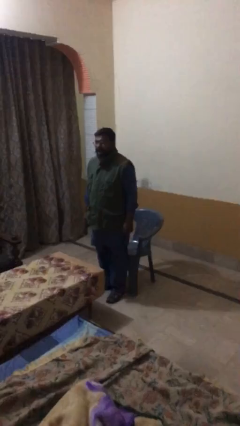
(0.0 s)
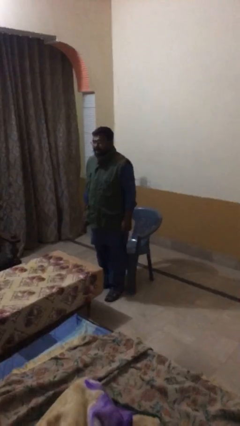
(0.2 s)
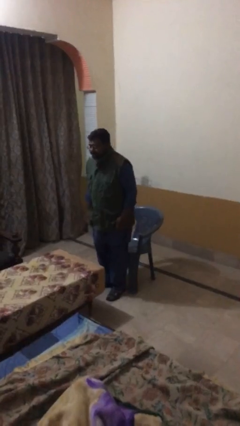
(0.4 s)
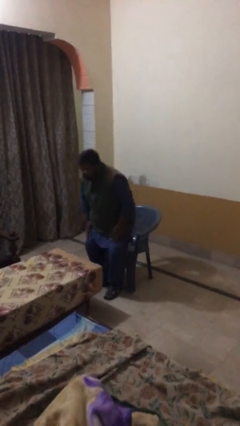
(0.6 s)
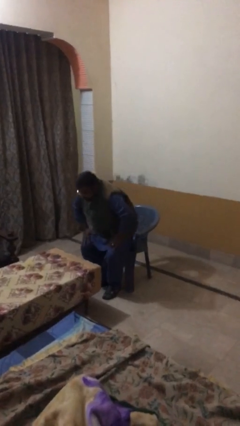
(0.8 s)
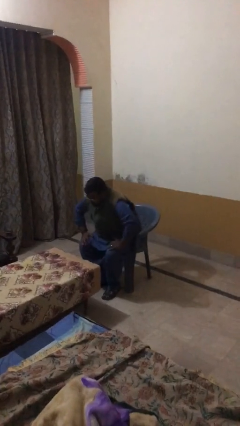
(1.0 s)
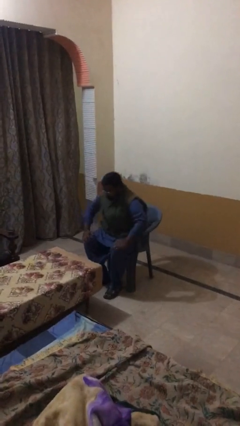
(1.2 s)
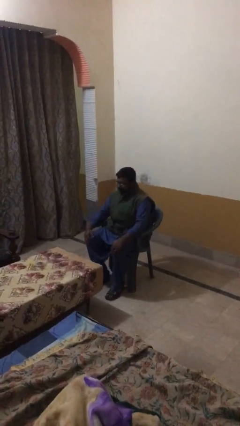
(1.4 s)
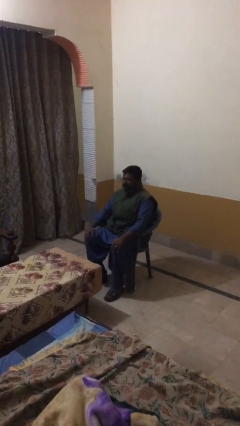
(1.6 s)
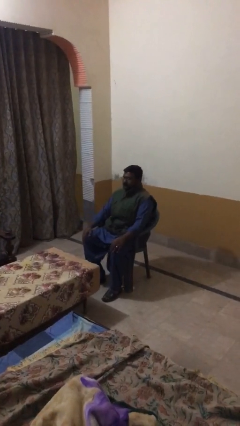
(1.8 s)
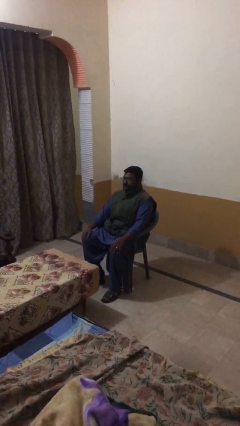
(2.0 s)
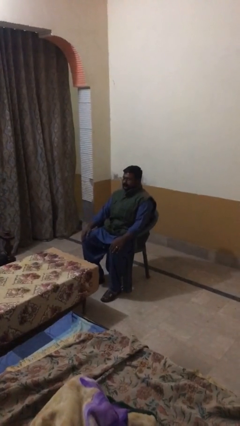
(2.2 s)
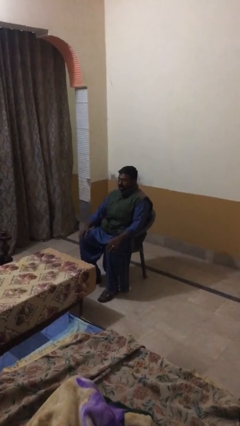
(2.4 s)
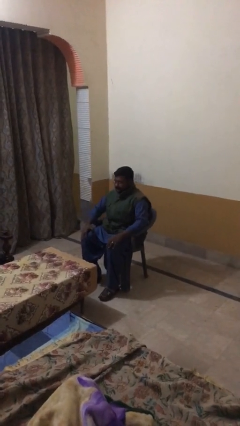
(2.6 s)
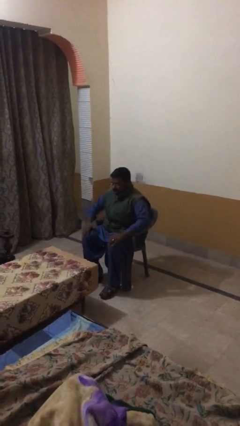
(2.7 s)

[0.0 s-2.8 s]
person sits down

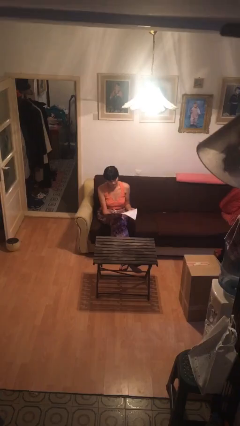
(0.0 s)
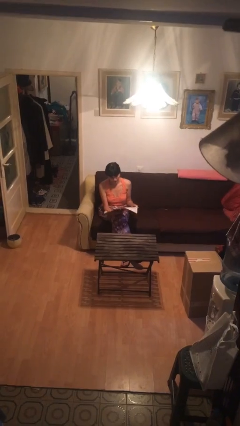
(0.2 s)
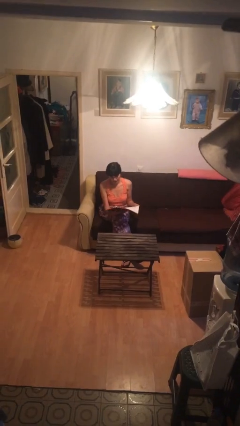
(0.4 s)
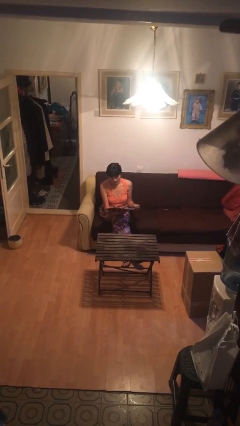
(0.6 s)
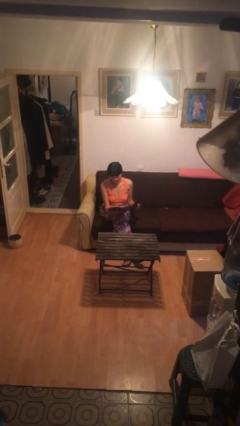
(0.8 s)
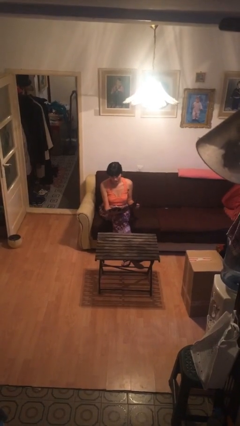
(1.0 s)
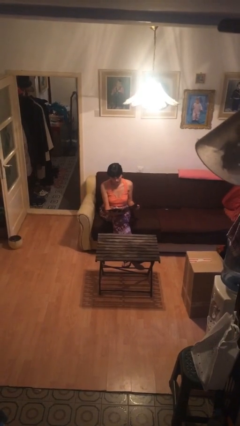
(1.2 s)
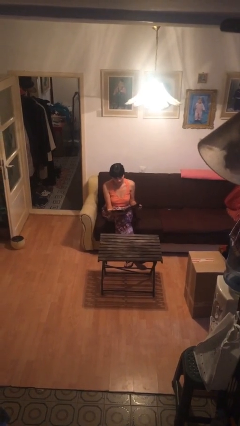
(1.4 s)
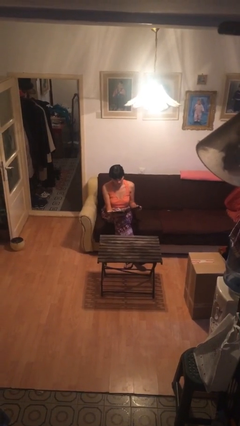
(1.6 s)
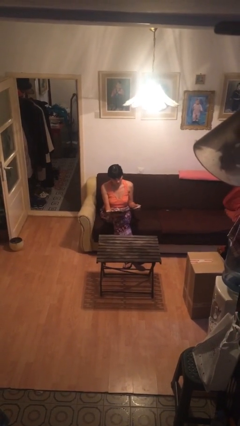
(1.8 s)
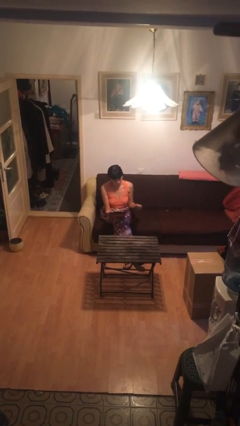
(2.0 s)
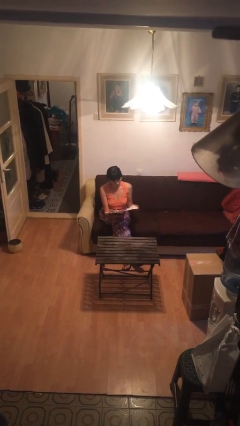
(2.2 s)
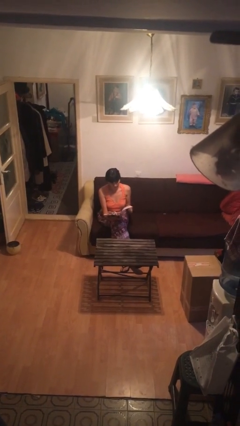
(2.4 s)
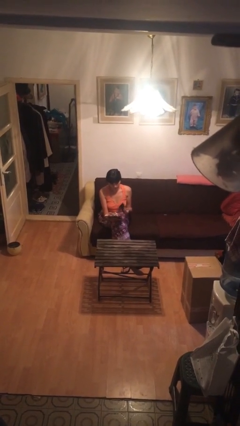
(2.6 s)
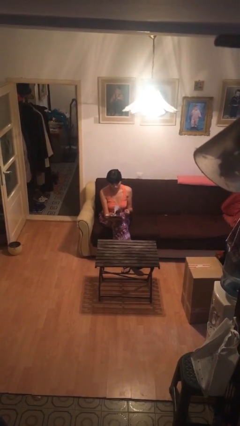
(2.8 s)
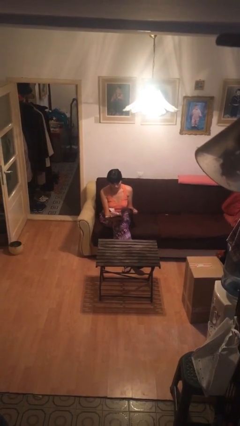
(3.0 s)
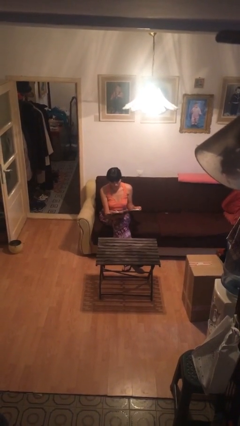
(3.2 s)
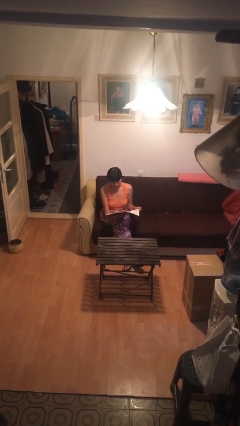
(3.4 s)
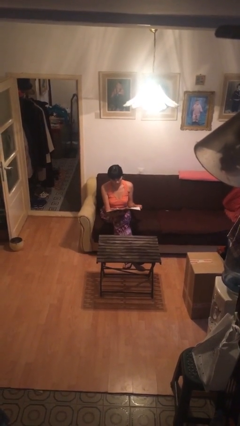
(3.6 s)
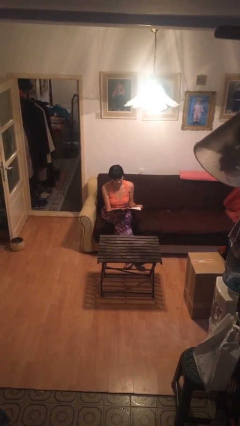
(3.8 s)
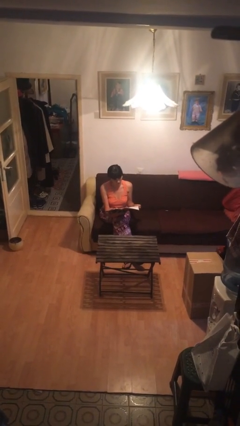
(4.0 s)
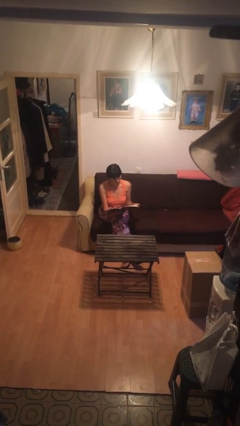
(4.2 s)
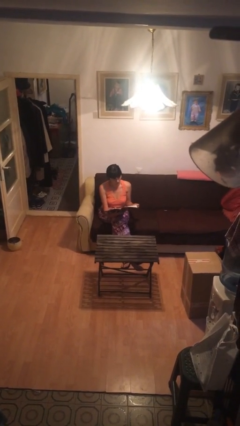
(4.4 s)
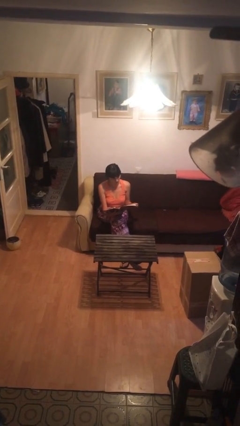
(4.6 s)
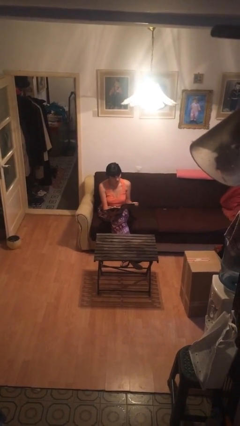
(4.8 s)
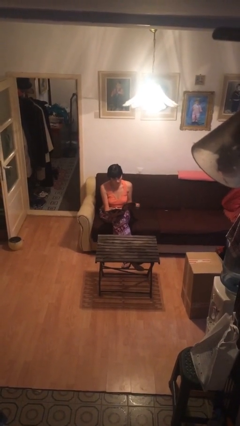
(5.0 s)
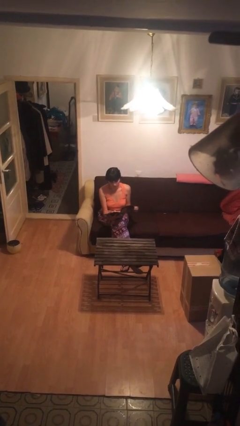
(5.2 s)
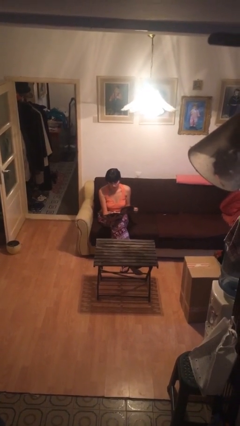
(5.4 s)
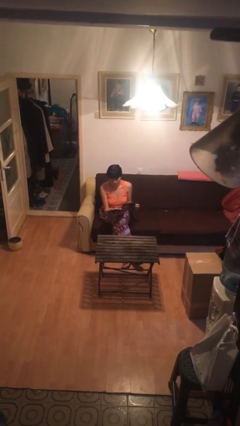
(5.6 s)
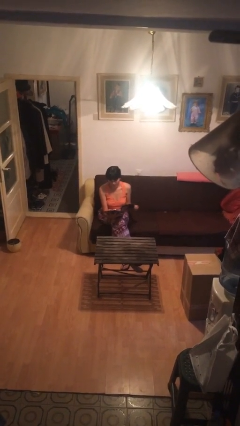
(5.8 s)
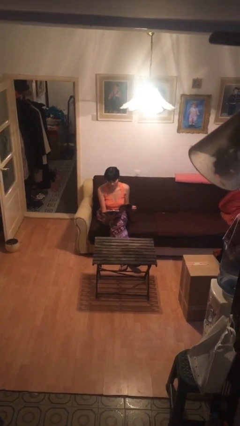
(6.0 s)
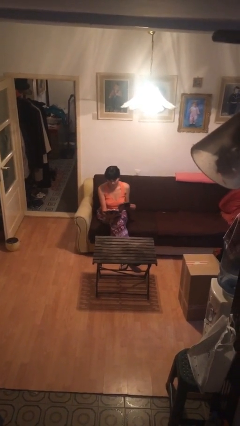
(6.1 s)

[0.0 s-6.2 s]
person reads document

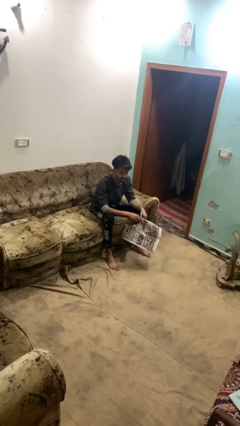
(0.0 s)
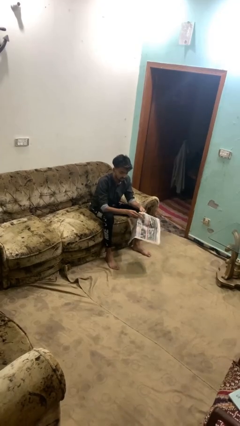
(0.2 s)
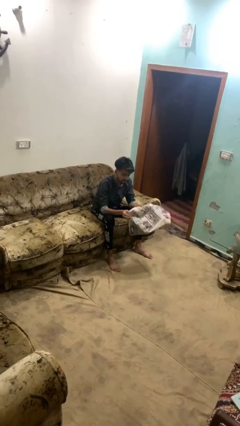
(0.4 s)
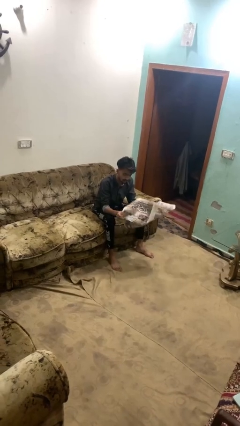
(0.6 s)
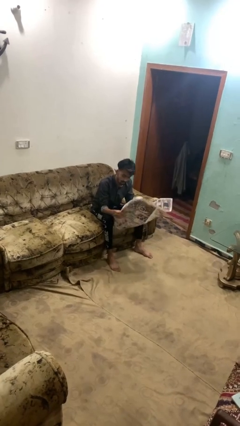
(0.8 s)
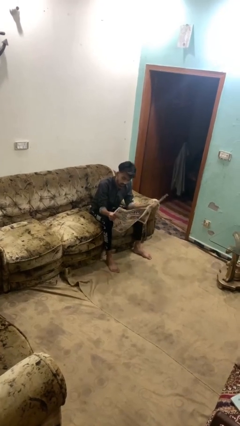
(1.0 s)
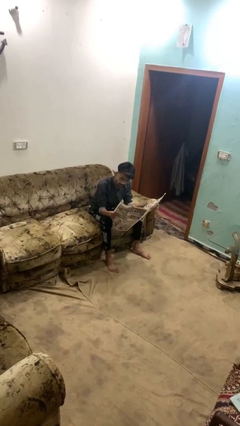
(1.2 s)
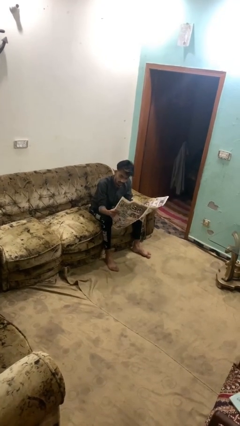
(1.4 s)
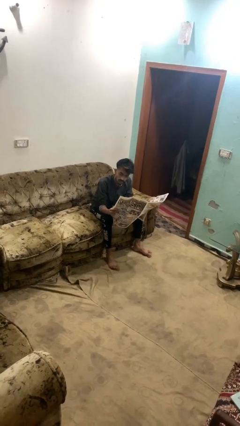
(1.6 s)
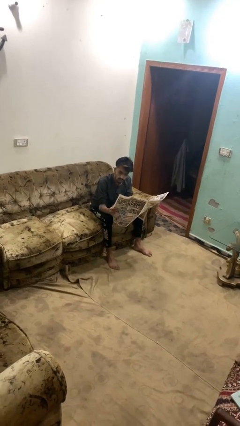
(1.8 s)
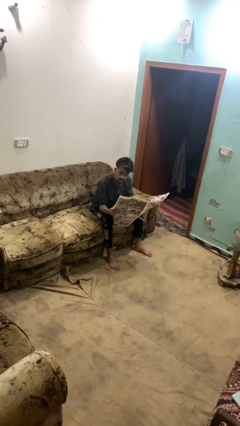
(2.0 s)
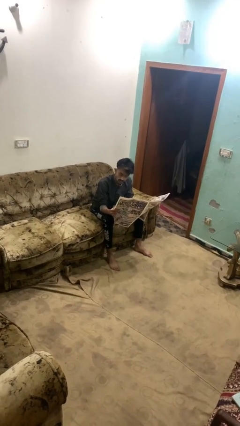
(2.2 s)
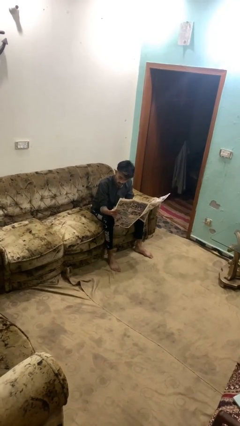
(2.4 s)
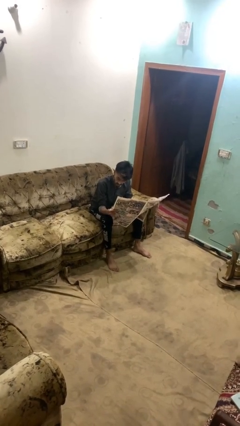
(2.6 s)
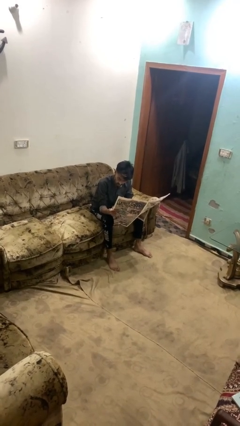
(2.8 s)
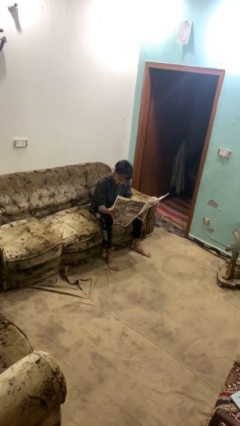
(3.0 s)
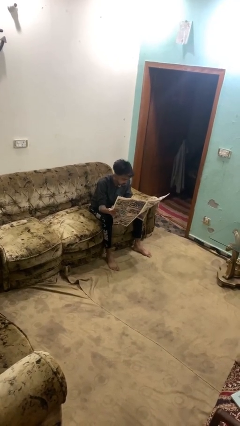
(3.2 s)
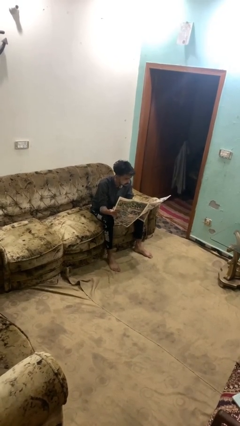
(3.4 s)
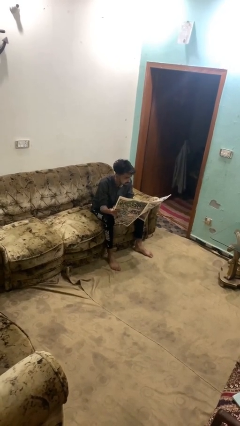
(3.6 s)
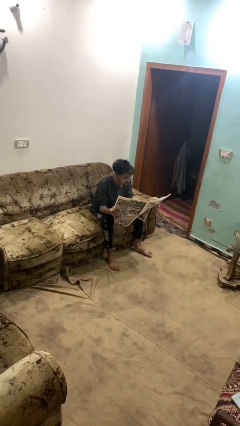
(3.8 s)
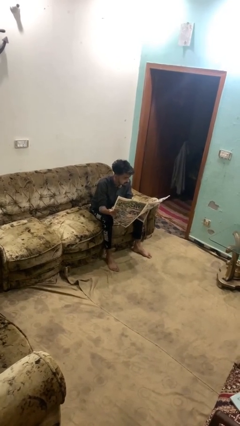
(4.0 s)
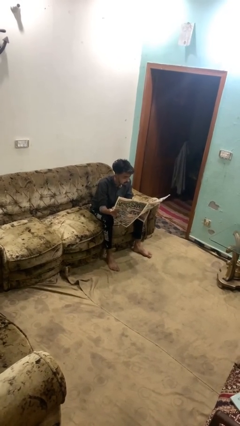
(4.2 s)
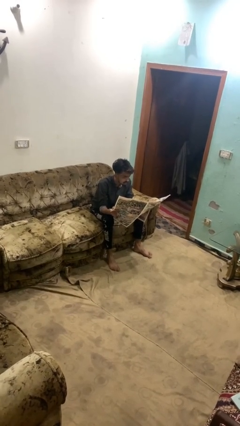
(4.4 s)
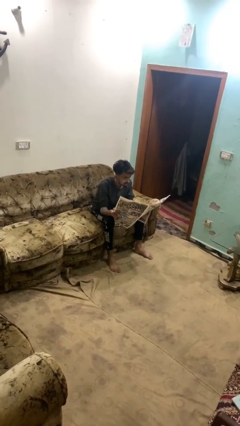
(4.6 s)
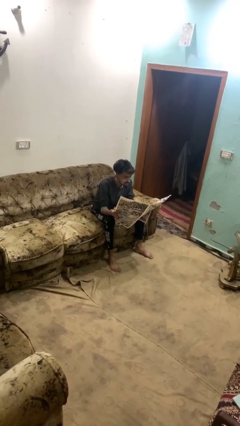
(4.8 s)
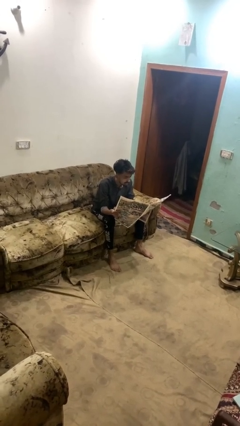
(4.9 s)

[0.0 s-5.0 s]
person reads newspaper

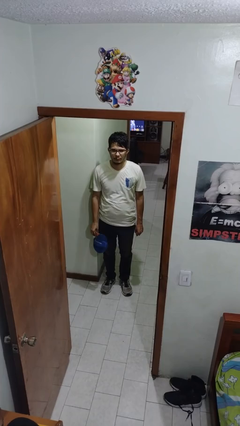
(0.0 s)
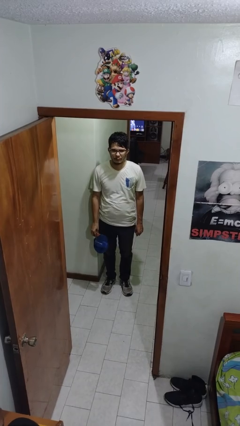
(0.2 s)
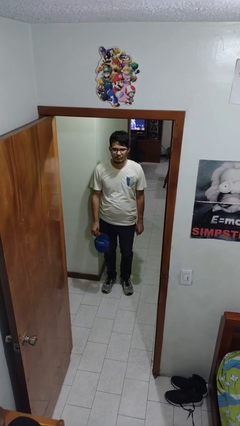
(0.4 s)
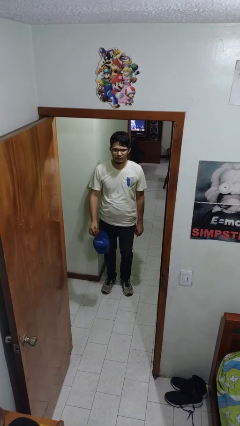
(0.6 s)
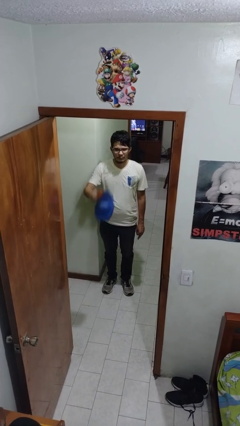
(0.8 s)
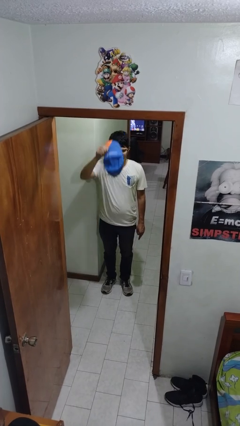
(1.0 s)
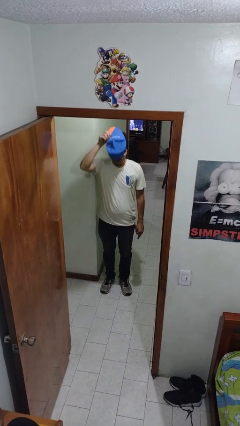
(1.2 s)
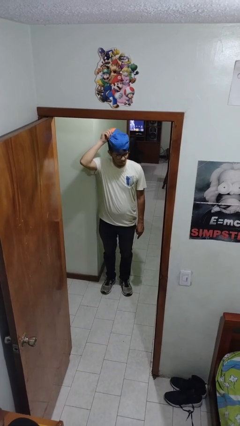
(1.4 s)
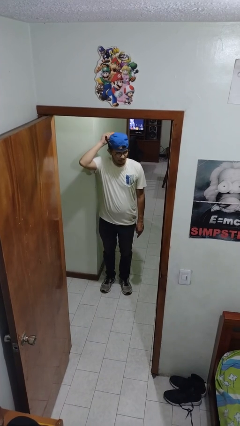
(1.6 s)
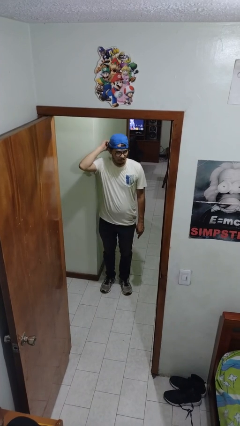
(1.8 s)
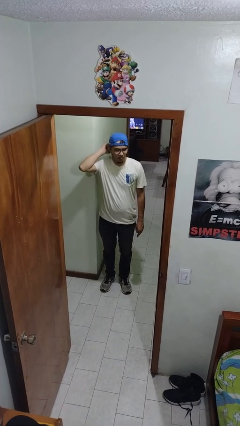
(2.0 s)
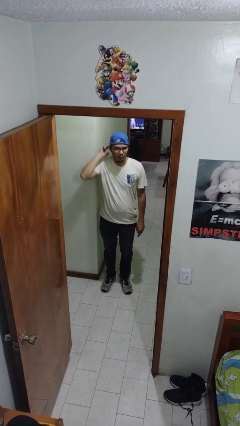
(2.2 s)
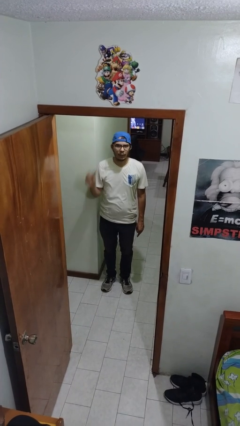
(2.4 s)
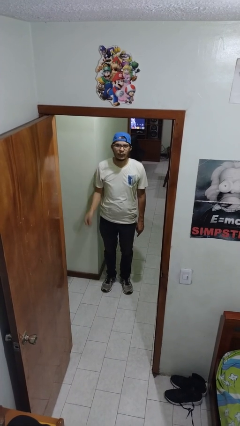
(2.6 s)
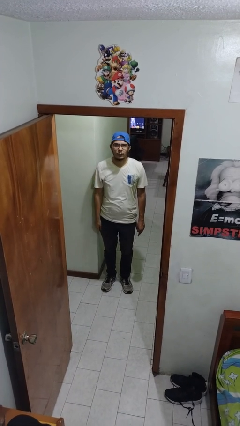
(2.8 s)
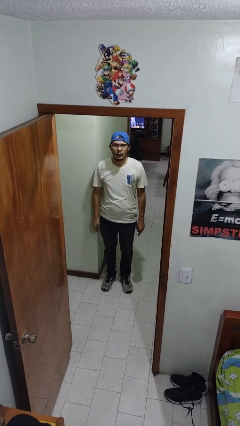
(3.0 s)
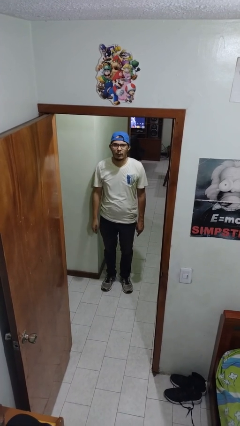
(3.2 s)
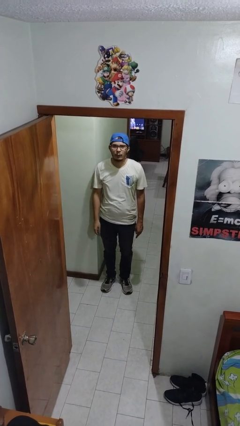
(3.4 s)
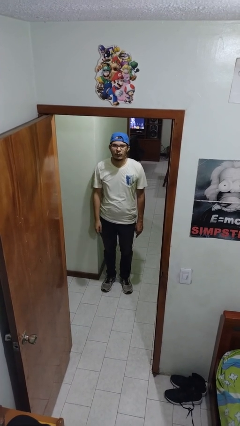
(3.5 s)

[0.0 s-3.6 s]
person puts on hat

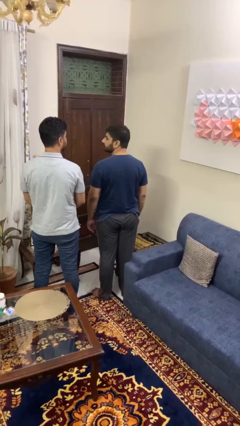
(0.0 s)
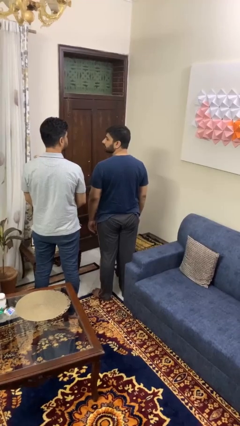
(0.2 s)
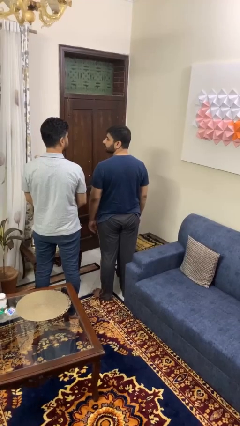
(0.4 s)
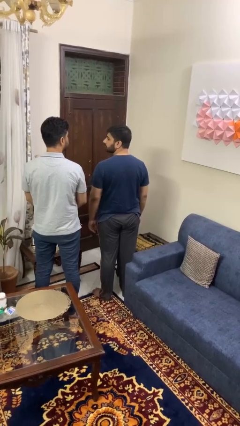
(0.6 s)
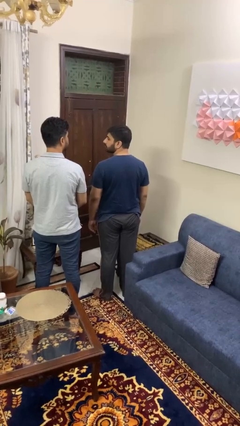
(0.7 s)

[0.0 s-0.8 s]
person looks over shoulder
